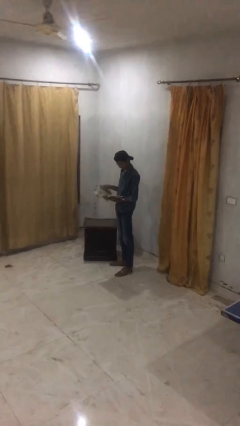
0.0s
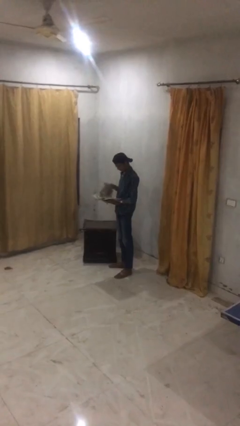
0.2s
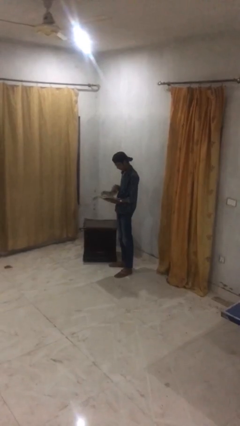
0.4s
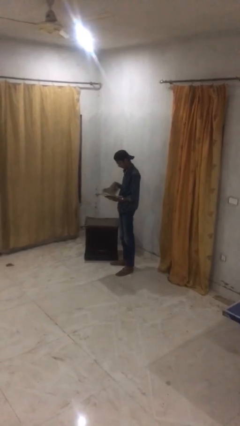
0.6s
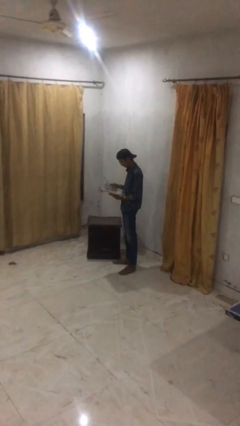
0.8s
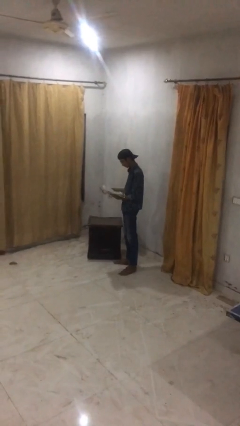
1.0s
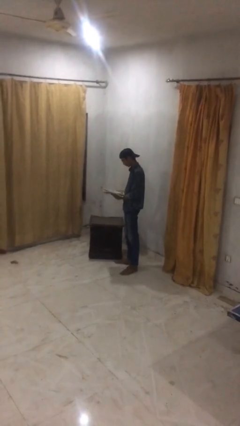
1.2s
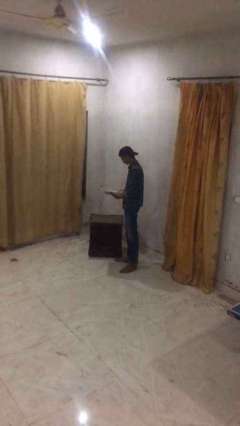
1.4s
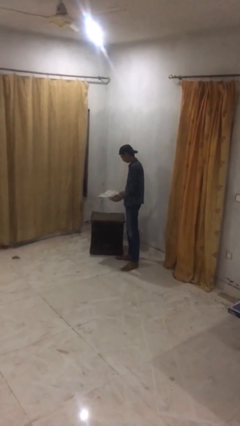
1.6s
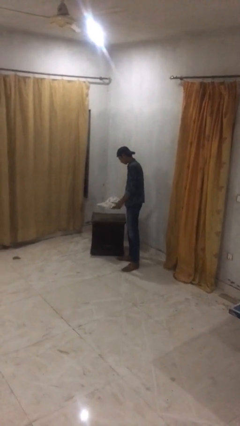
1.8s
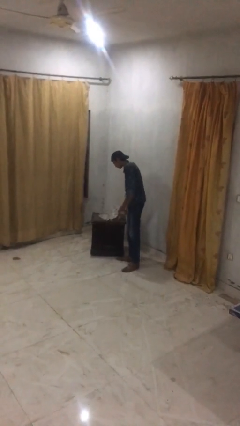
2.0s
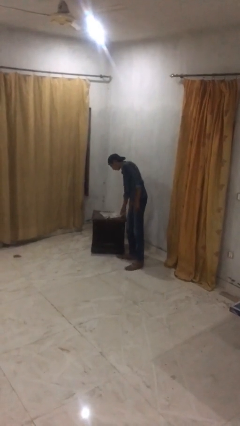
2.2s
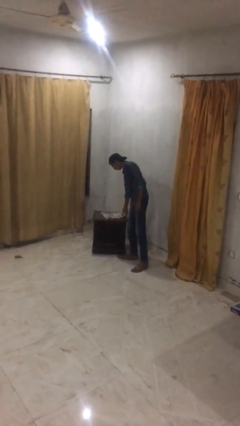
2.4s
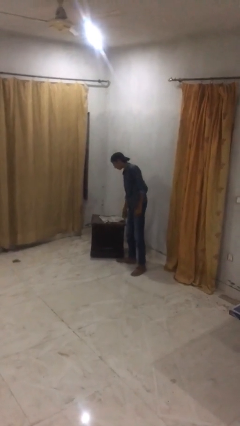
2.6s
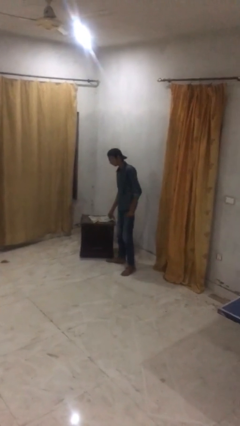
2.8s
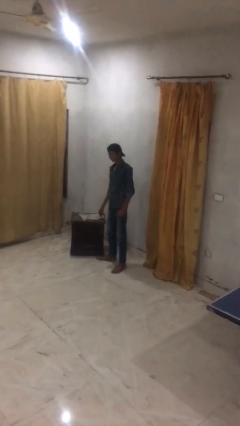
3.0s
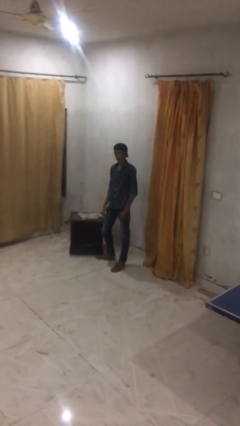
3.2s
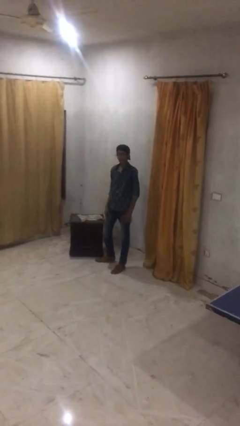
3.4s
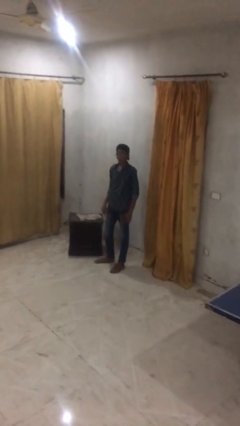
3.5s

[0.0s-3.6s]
person puts down object on table

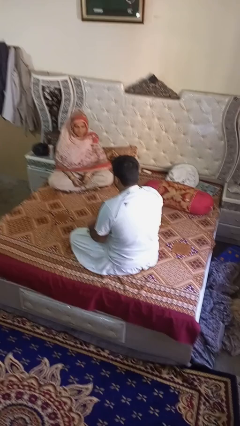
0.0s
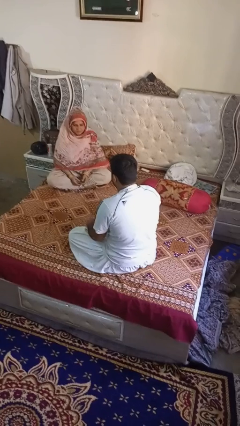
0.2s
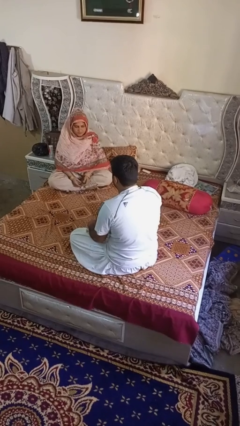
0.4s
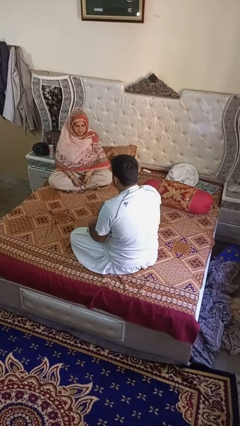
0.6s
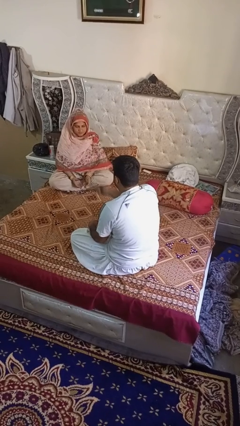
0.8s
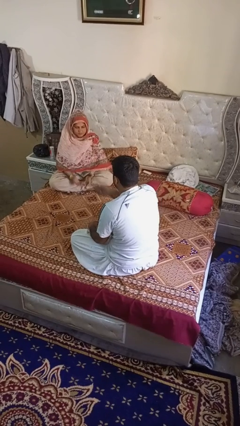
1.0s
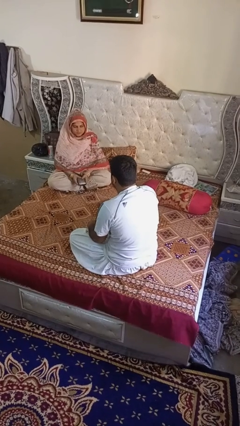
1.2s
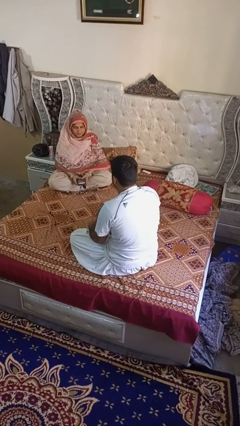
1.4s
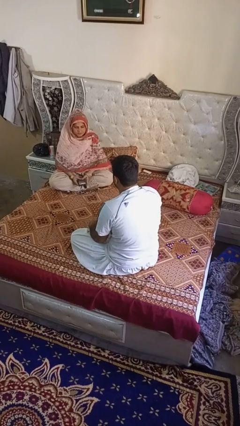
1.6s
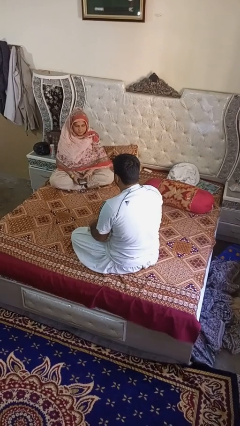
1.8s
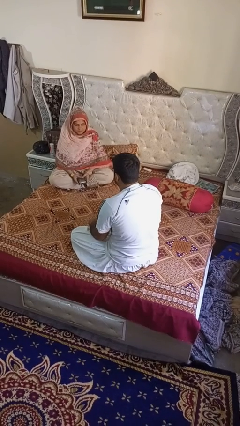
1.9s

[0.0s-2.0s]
person throws object to person

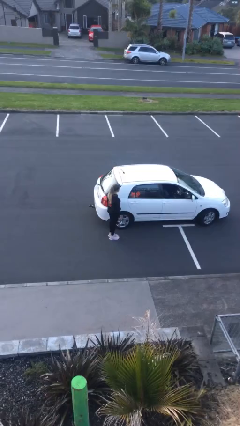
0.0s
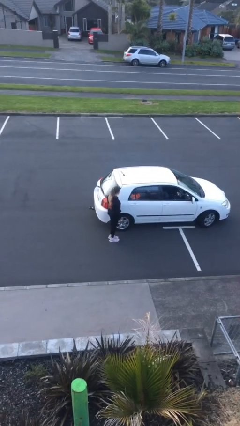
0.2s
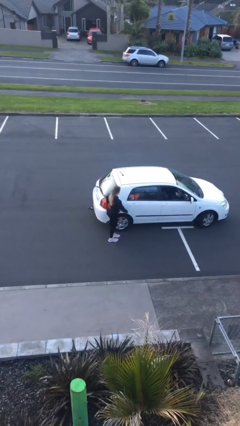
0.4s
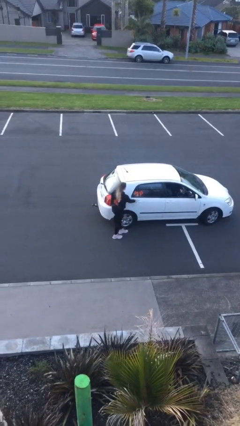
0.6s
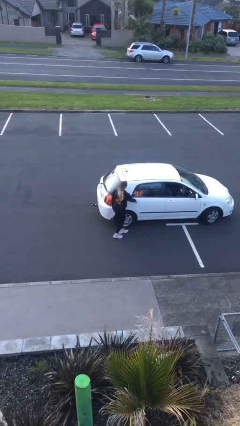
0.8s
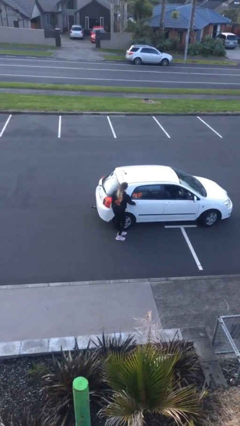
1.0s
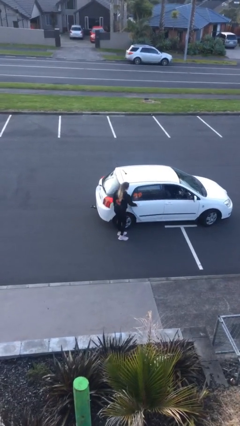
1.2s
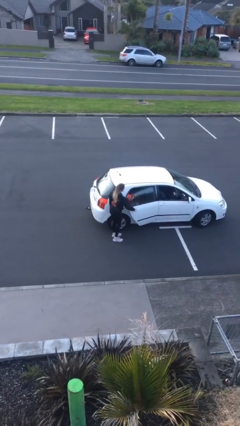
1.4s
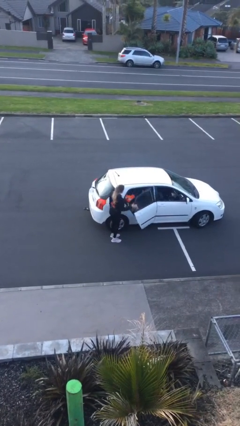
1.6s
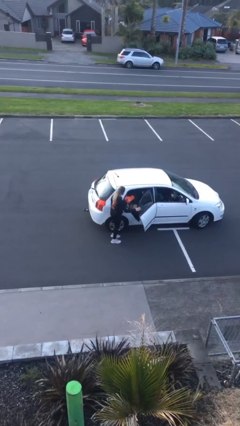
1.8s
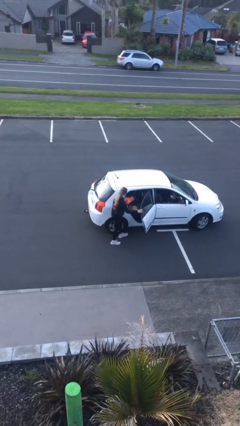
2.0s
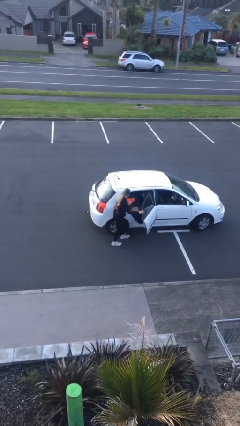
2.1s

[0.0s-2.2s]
person opens car door

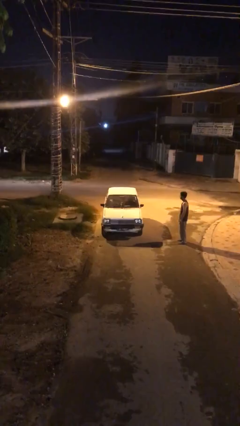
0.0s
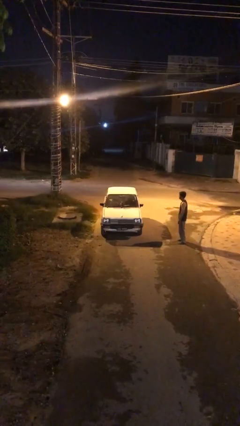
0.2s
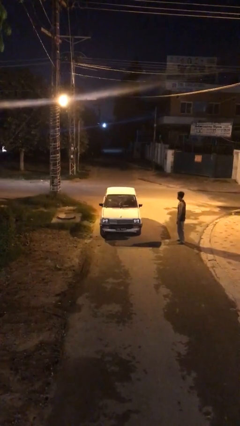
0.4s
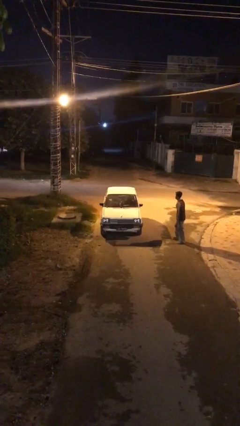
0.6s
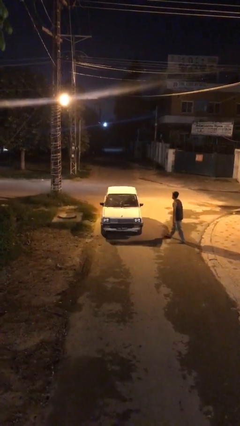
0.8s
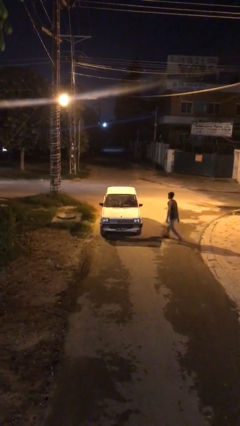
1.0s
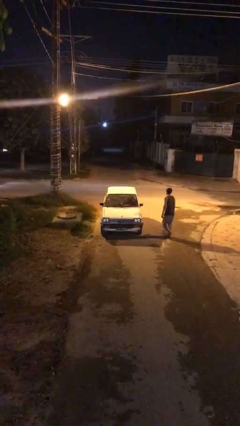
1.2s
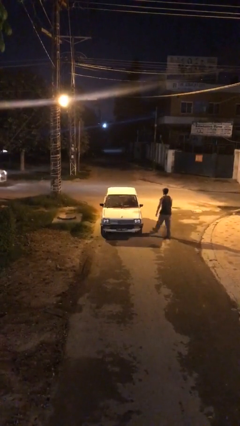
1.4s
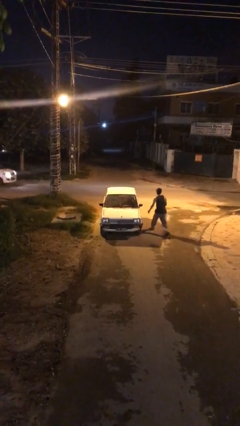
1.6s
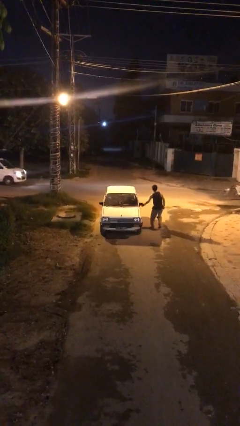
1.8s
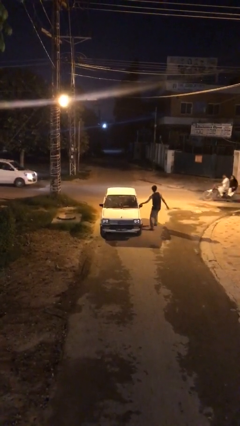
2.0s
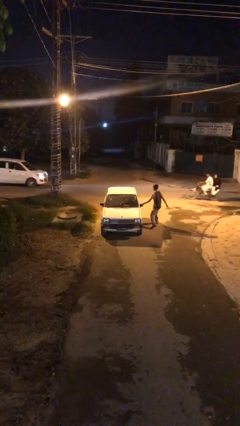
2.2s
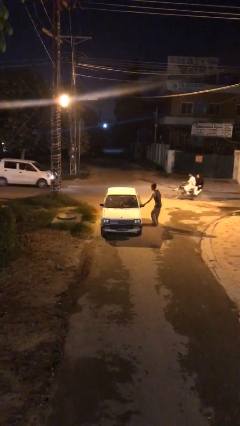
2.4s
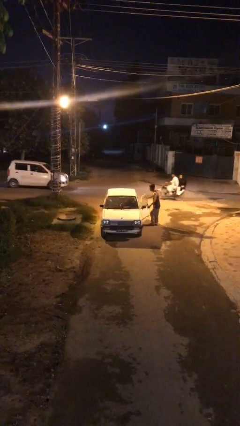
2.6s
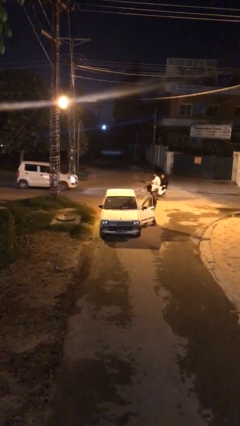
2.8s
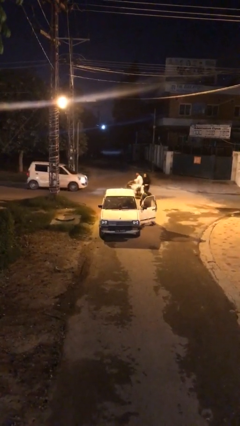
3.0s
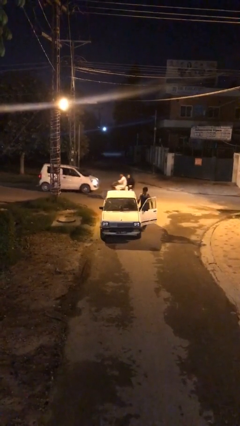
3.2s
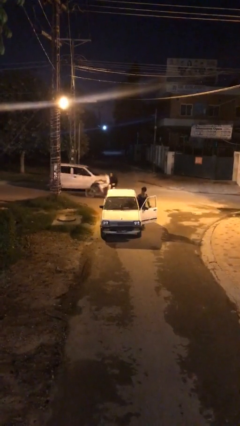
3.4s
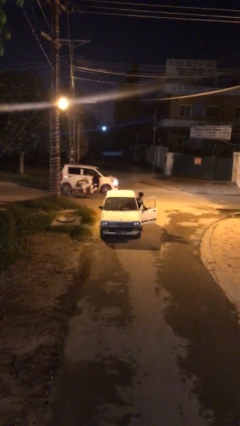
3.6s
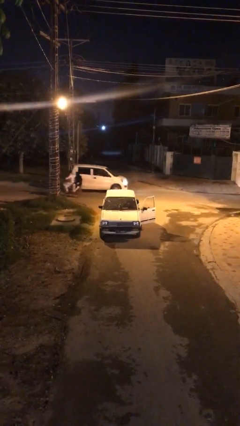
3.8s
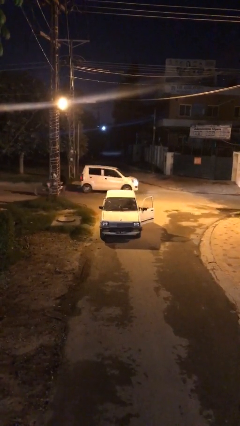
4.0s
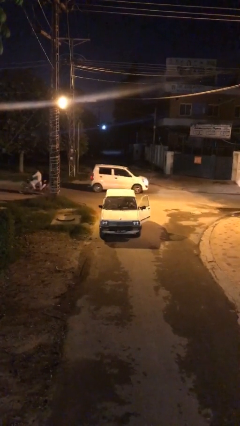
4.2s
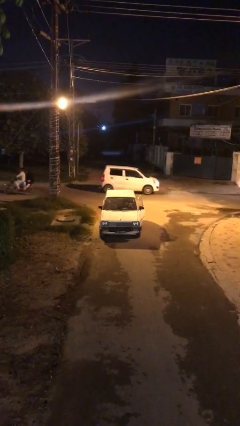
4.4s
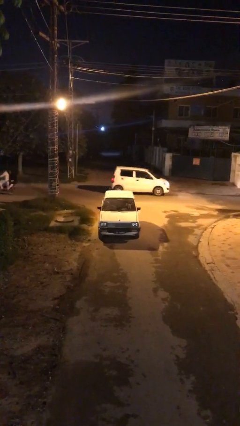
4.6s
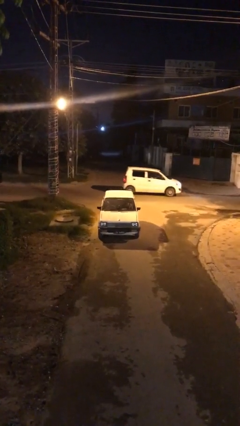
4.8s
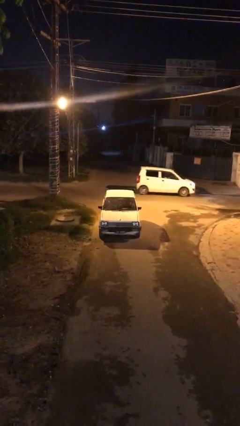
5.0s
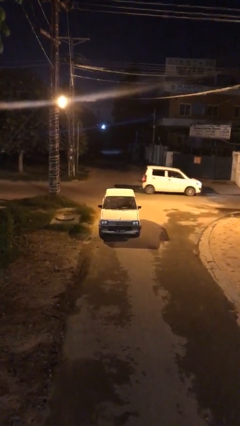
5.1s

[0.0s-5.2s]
car picks up person

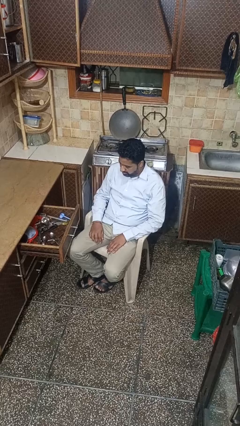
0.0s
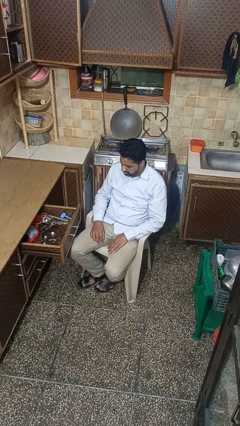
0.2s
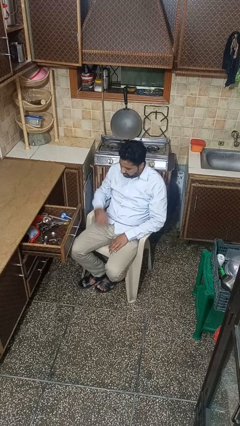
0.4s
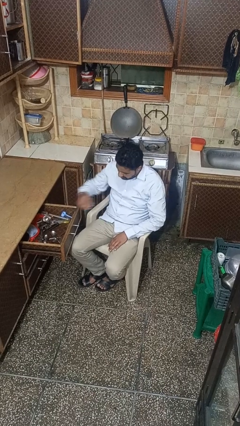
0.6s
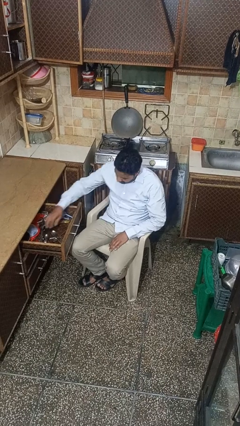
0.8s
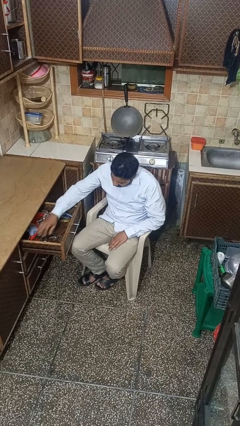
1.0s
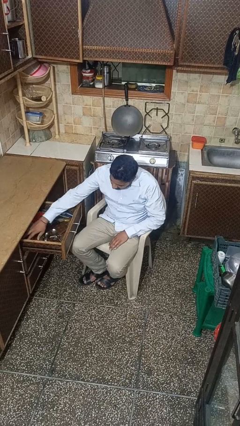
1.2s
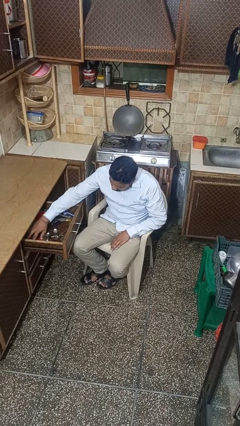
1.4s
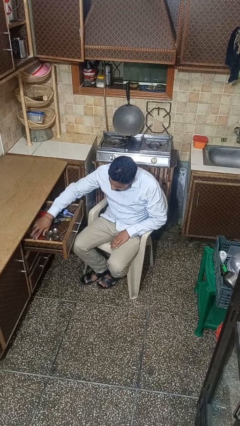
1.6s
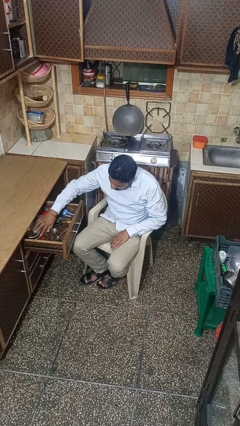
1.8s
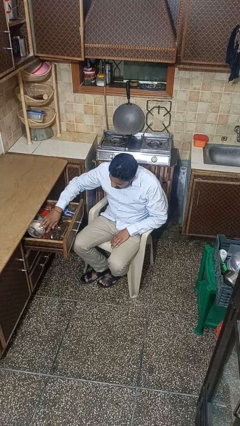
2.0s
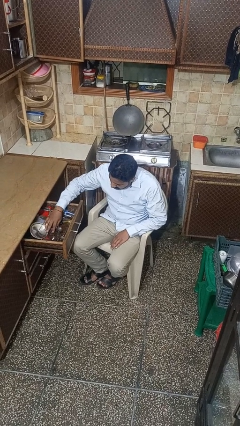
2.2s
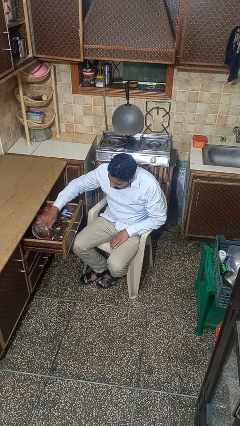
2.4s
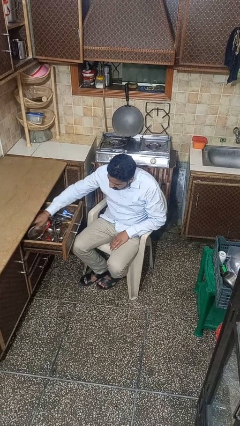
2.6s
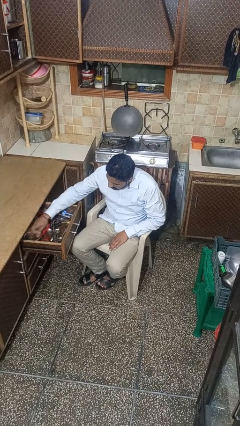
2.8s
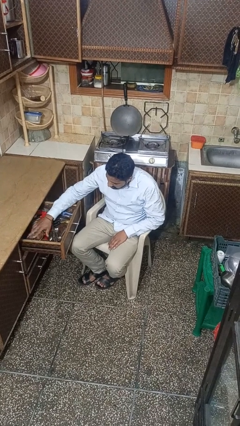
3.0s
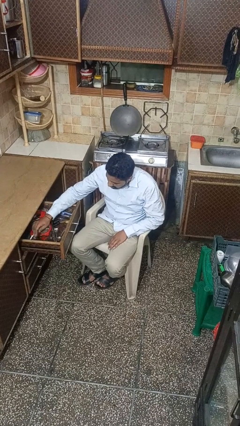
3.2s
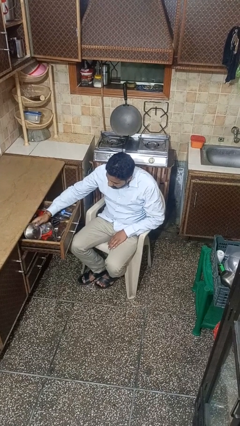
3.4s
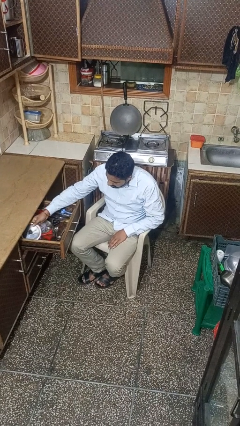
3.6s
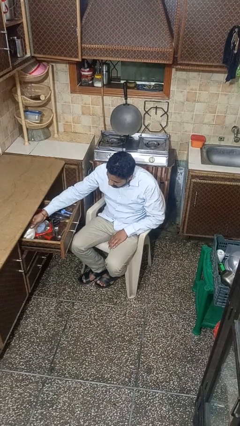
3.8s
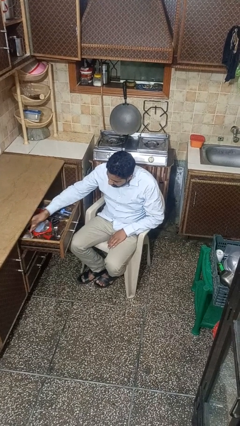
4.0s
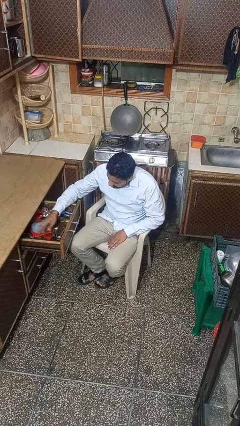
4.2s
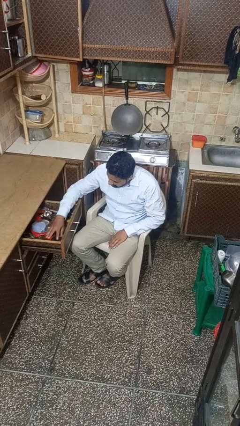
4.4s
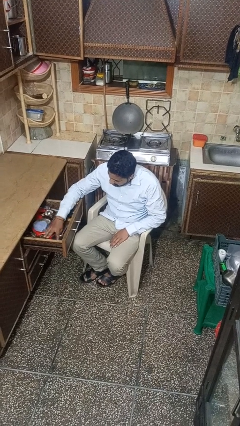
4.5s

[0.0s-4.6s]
person searches in kitchen drawer
